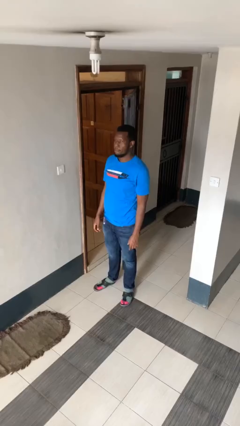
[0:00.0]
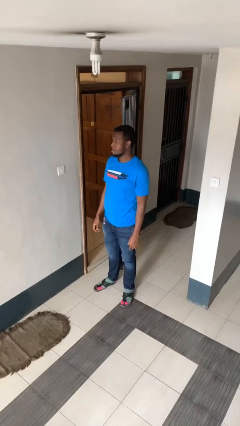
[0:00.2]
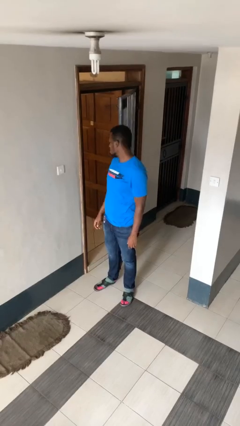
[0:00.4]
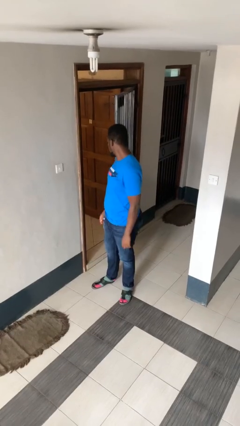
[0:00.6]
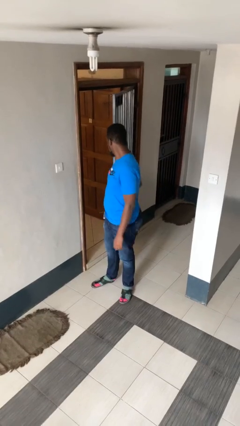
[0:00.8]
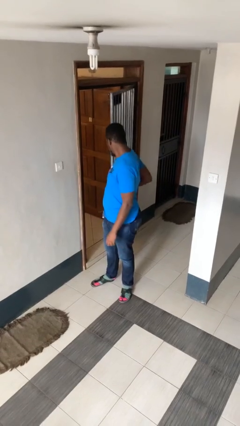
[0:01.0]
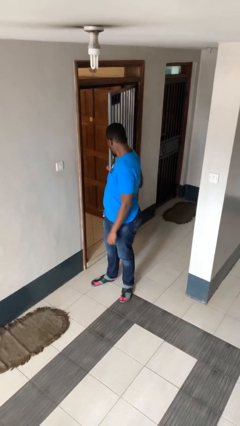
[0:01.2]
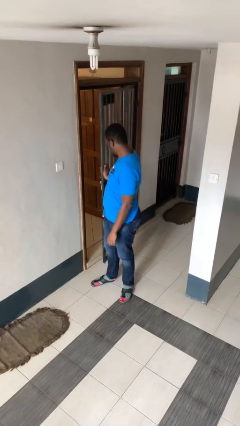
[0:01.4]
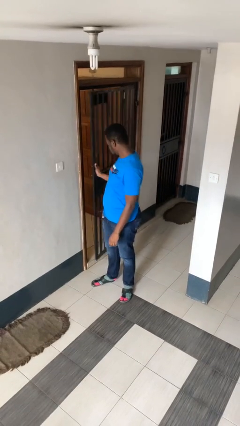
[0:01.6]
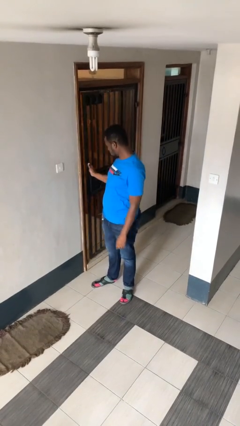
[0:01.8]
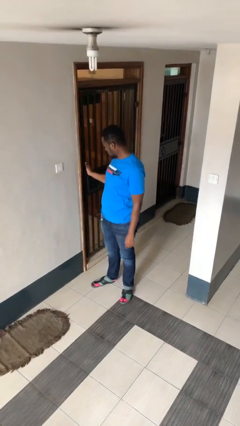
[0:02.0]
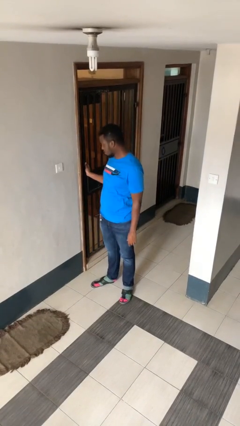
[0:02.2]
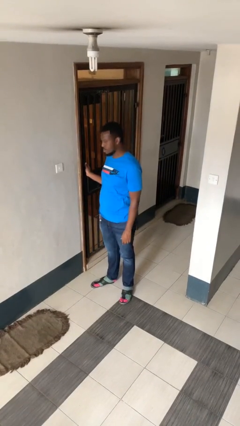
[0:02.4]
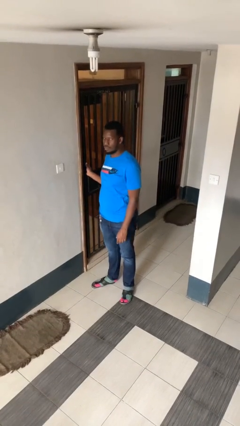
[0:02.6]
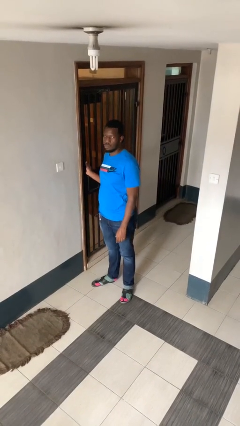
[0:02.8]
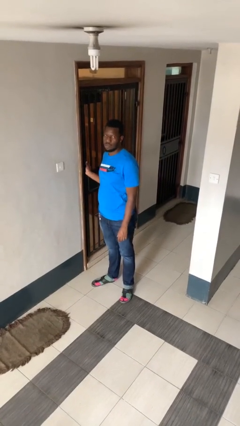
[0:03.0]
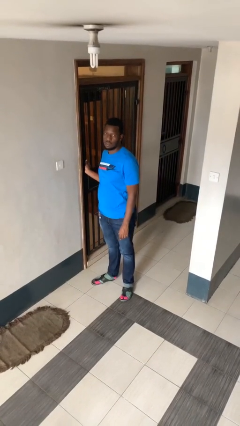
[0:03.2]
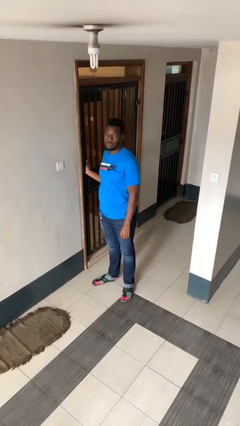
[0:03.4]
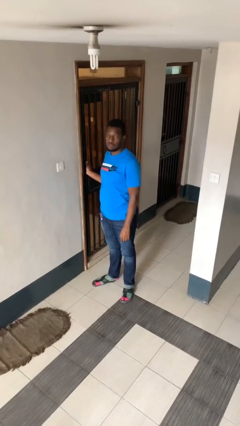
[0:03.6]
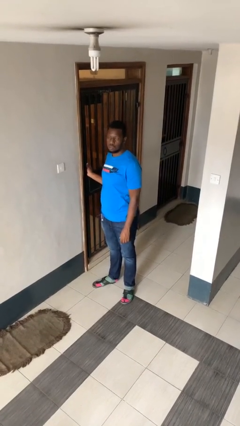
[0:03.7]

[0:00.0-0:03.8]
person closes facility door

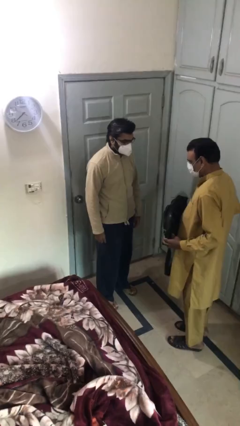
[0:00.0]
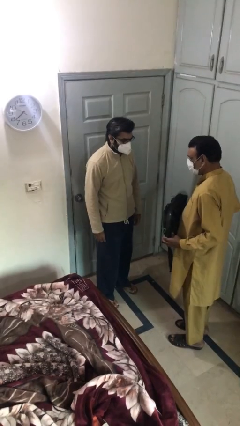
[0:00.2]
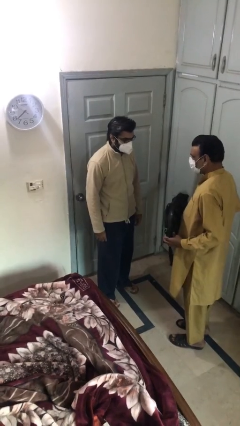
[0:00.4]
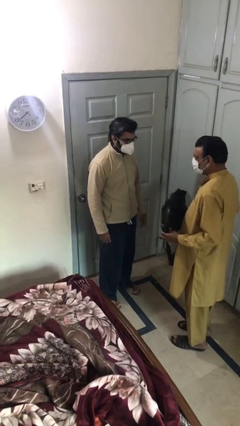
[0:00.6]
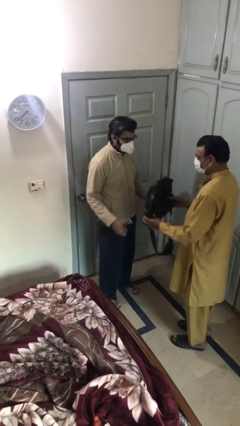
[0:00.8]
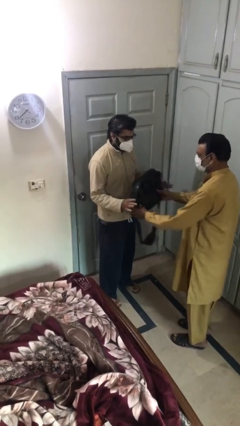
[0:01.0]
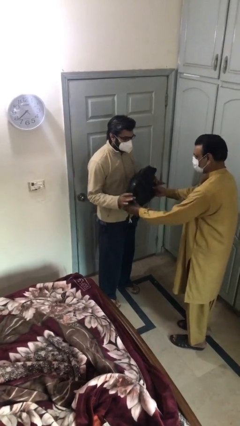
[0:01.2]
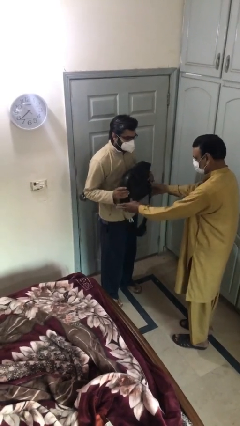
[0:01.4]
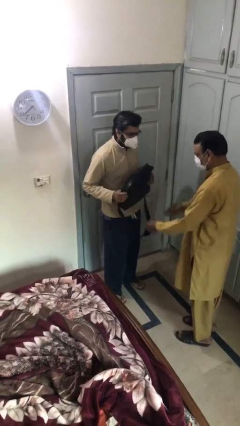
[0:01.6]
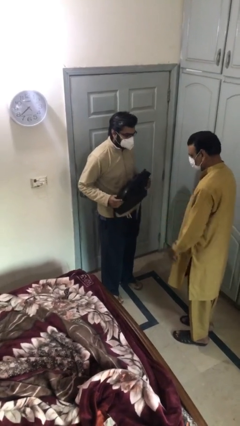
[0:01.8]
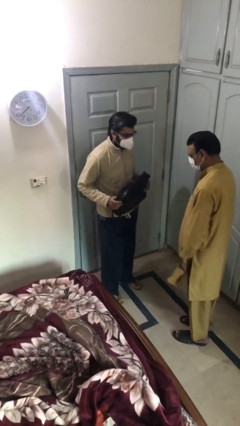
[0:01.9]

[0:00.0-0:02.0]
person transfers object to person

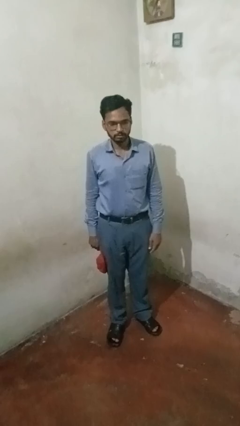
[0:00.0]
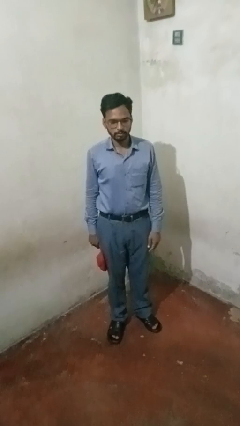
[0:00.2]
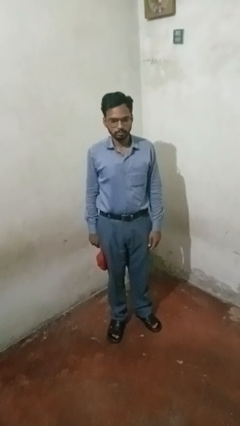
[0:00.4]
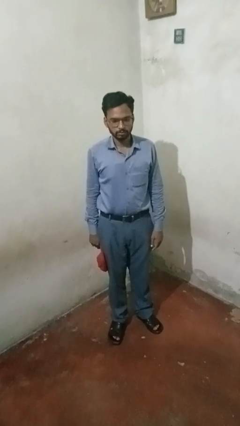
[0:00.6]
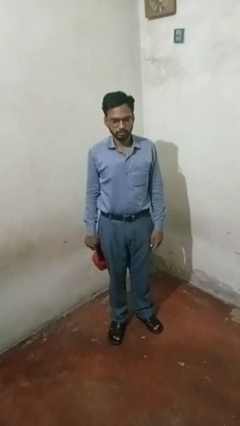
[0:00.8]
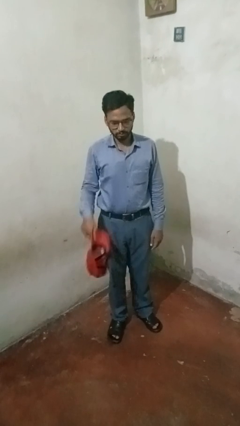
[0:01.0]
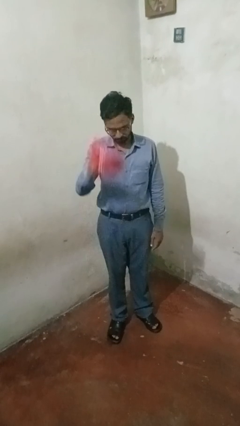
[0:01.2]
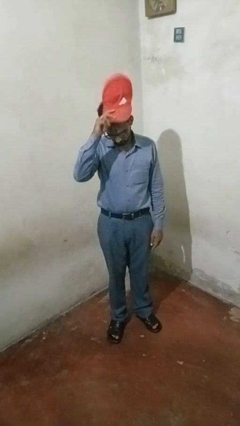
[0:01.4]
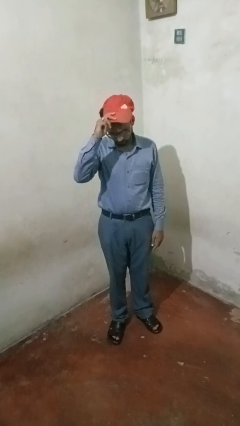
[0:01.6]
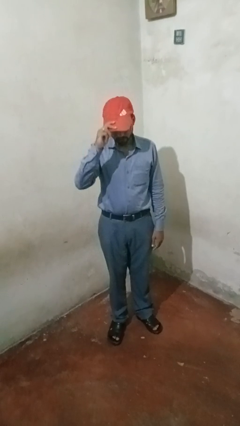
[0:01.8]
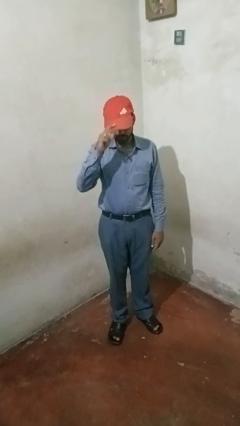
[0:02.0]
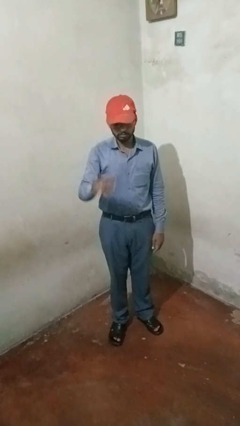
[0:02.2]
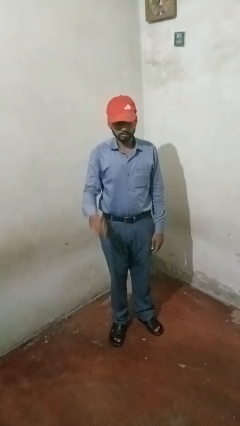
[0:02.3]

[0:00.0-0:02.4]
person puts on hat

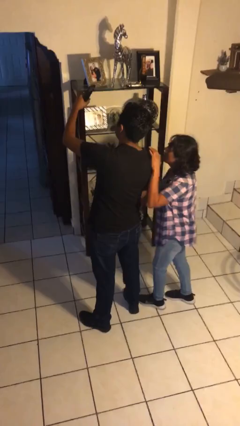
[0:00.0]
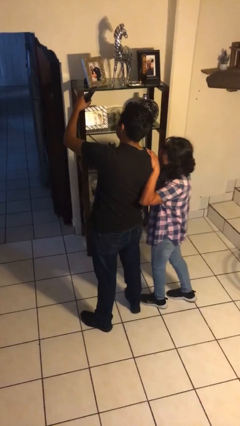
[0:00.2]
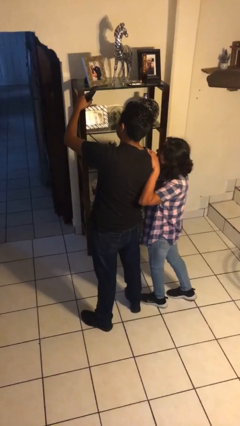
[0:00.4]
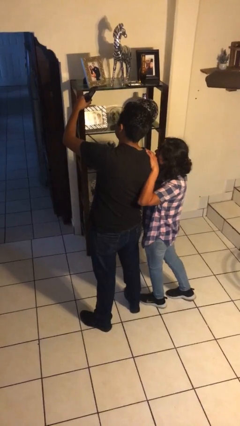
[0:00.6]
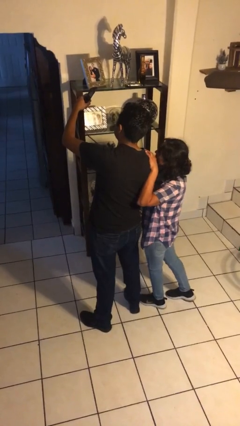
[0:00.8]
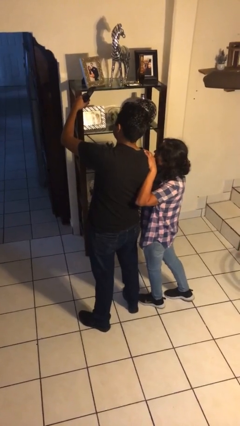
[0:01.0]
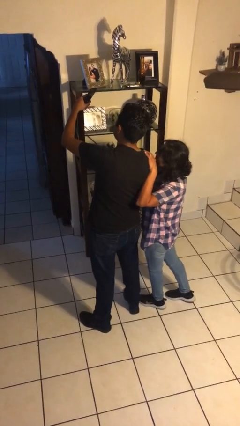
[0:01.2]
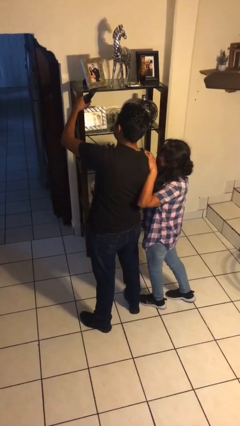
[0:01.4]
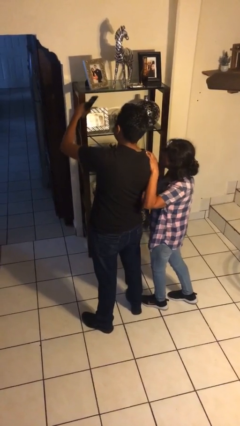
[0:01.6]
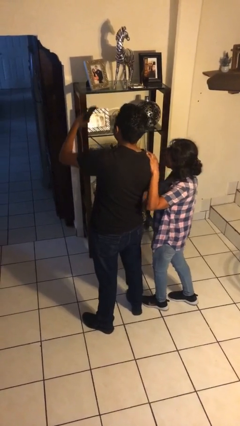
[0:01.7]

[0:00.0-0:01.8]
person takes selfie with person

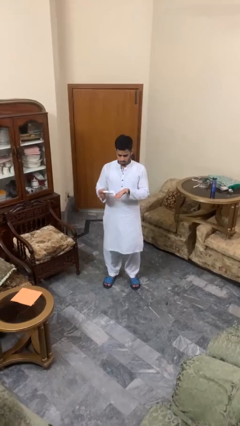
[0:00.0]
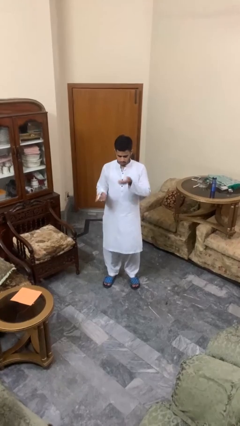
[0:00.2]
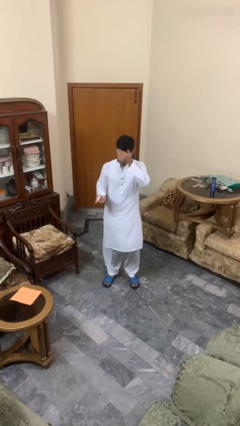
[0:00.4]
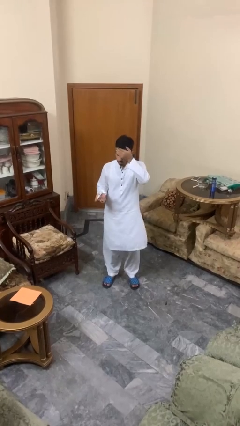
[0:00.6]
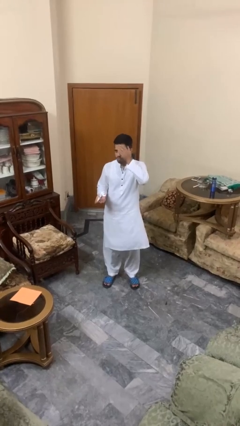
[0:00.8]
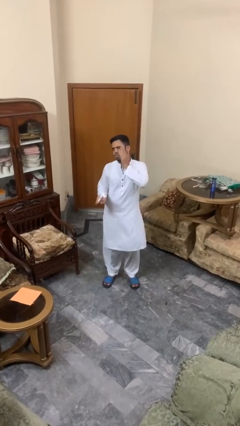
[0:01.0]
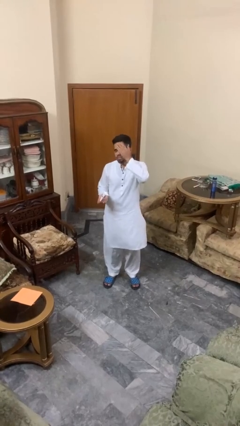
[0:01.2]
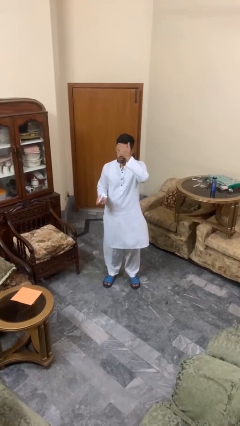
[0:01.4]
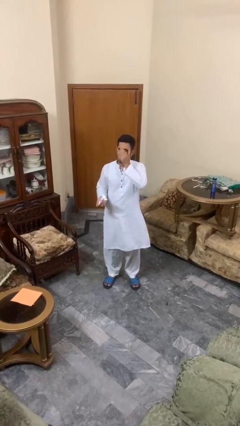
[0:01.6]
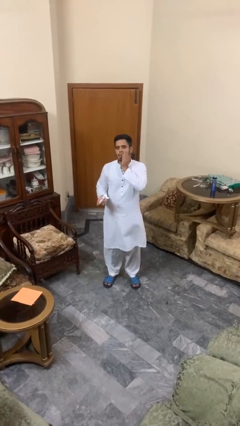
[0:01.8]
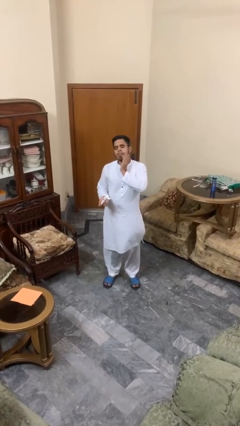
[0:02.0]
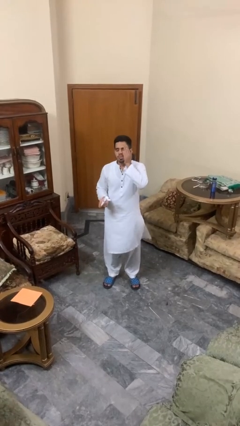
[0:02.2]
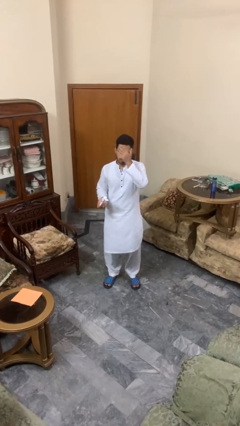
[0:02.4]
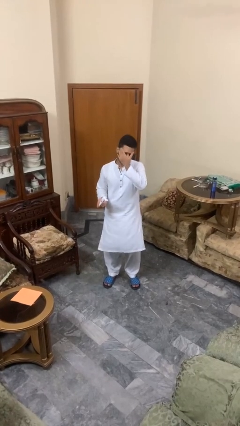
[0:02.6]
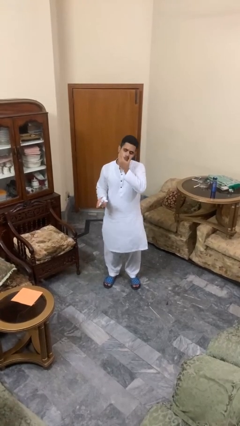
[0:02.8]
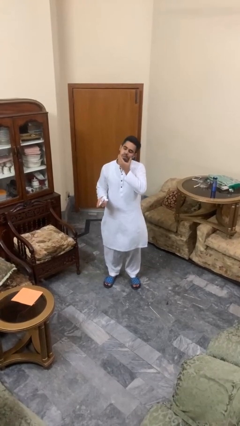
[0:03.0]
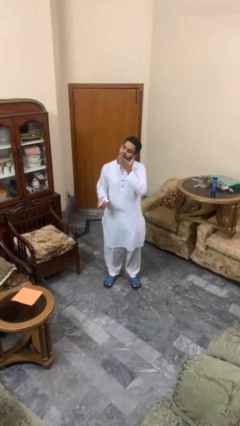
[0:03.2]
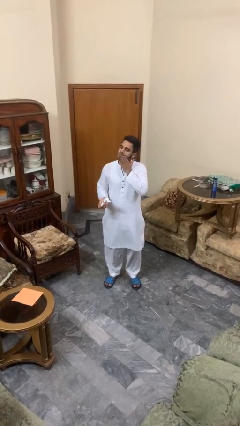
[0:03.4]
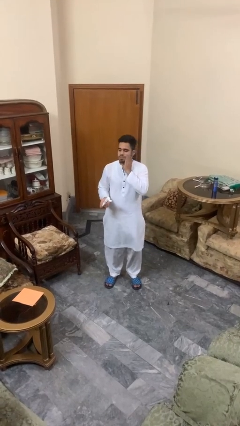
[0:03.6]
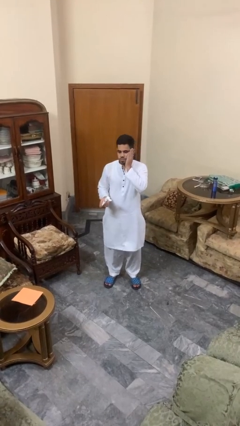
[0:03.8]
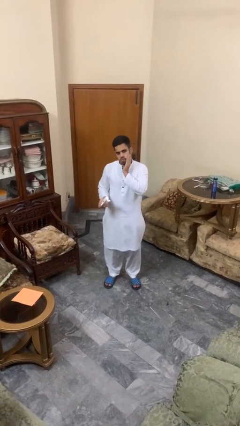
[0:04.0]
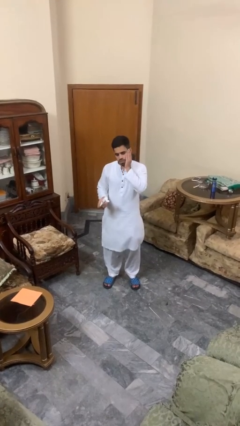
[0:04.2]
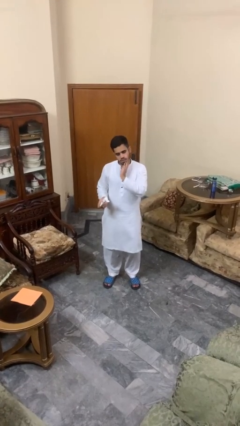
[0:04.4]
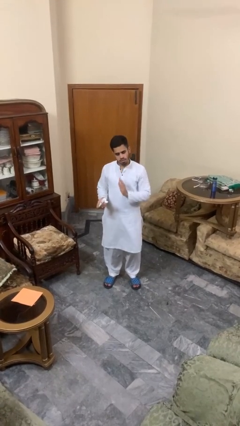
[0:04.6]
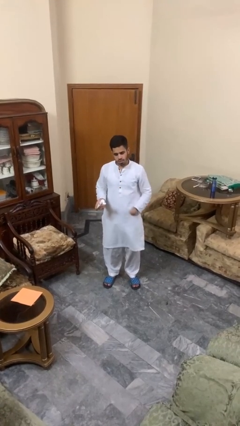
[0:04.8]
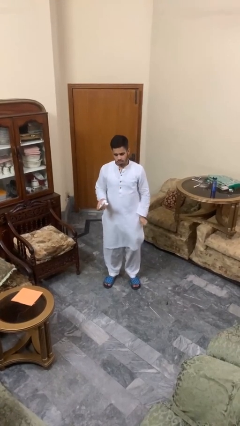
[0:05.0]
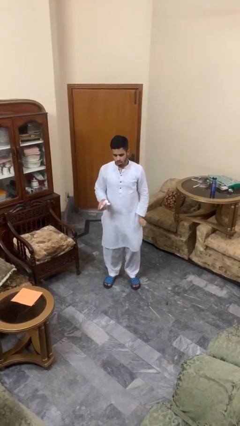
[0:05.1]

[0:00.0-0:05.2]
person applies facial moisturizer

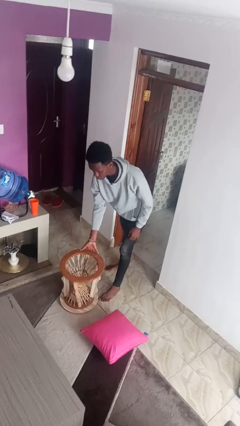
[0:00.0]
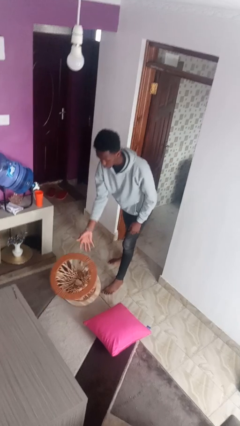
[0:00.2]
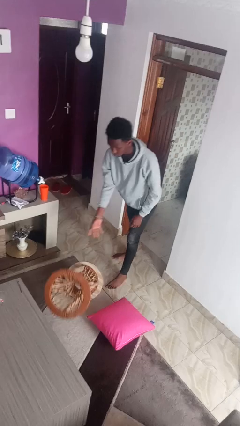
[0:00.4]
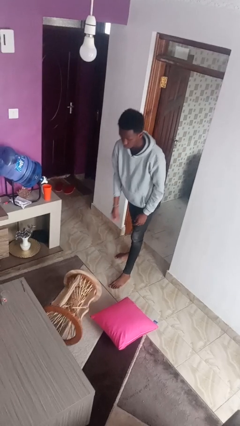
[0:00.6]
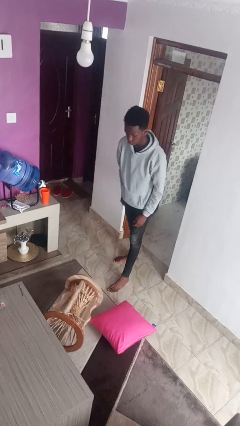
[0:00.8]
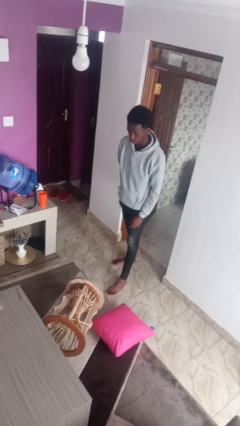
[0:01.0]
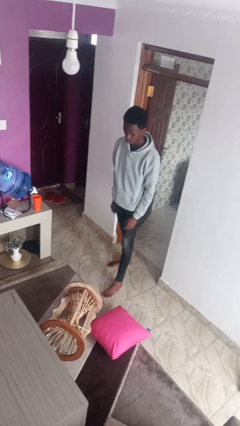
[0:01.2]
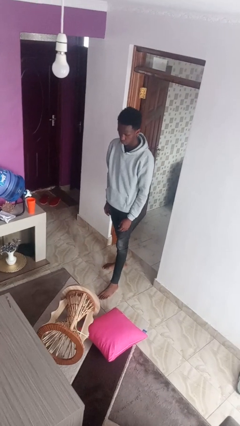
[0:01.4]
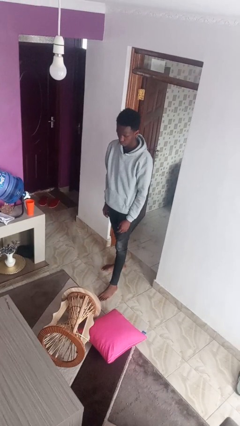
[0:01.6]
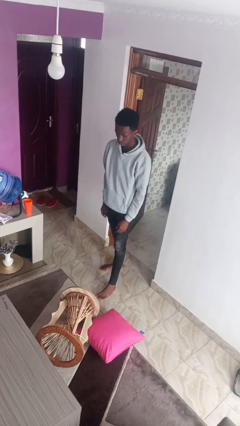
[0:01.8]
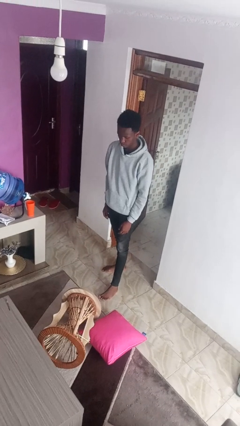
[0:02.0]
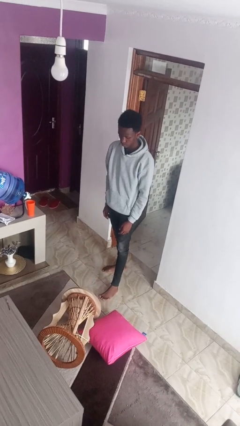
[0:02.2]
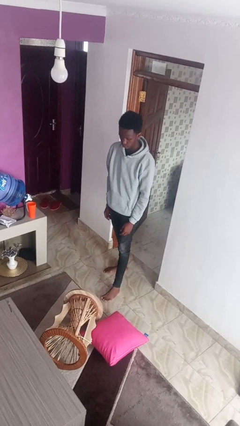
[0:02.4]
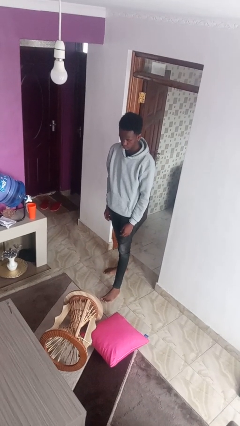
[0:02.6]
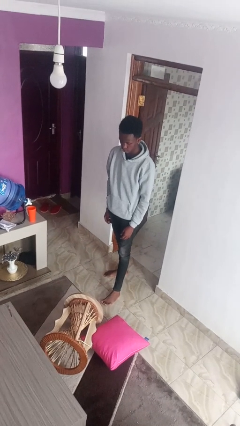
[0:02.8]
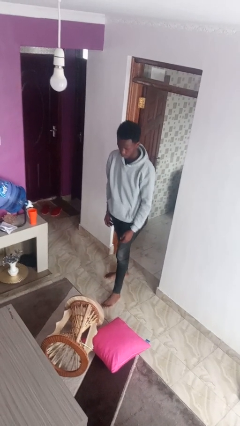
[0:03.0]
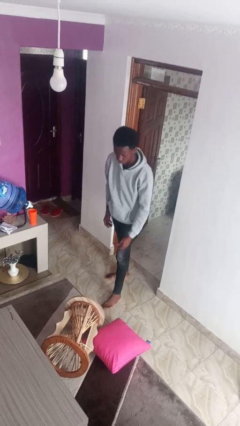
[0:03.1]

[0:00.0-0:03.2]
person knocks over furniture
